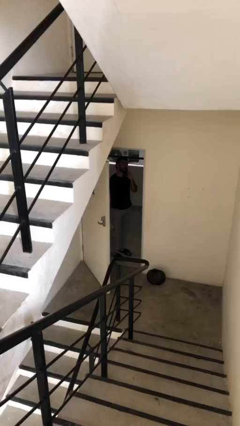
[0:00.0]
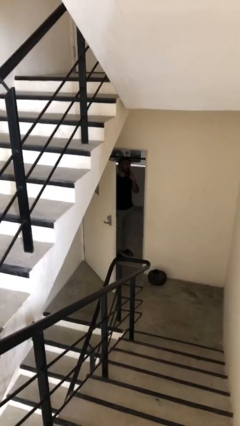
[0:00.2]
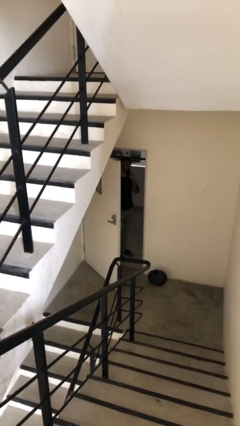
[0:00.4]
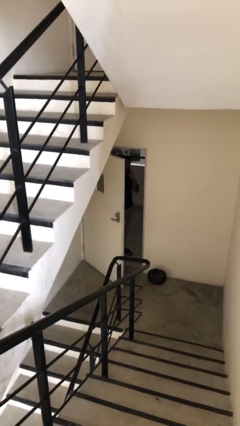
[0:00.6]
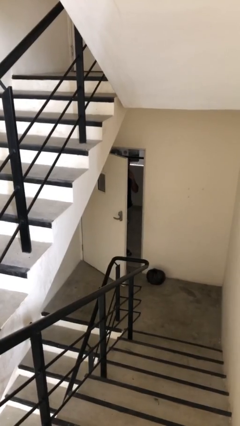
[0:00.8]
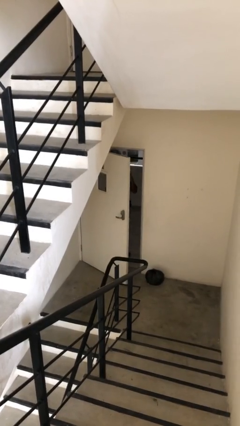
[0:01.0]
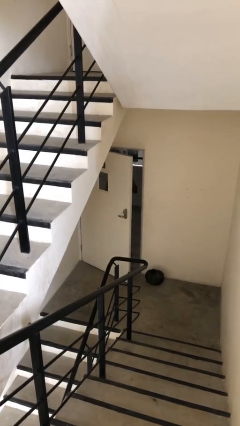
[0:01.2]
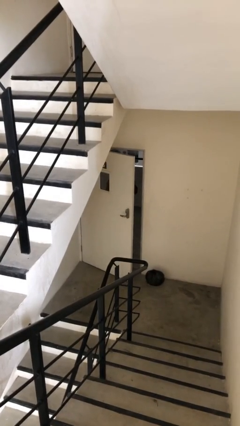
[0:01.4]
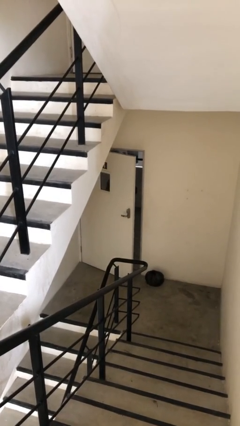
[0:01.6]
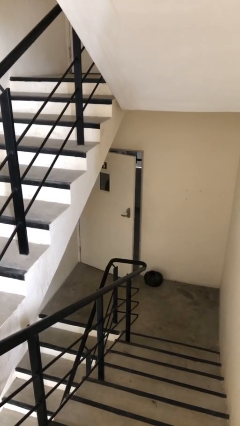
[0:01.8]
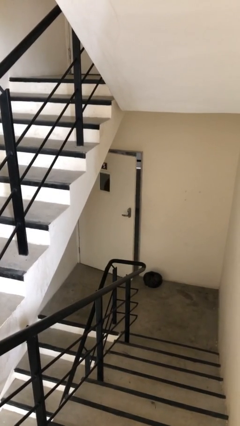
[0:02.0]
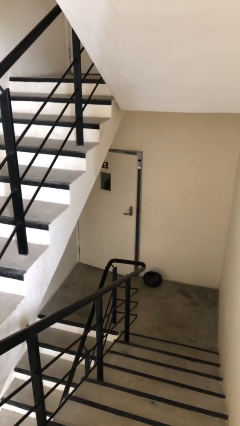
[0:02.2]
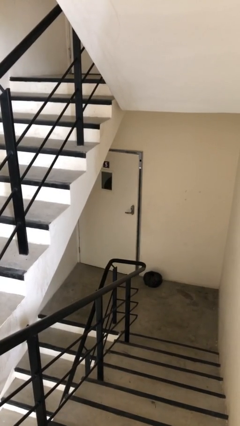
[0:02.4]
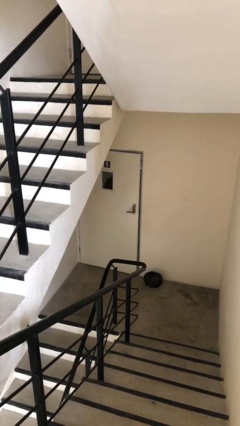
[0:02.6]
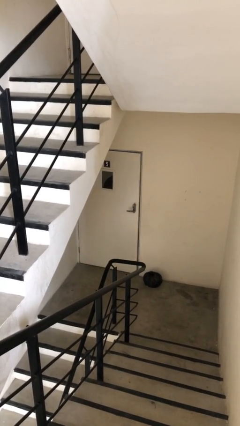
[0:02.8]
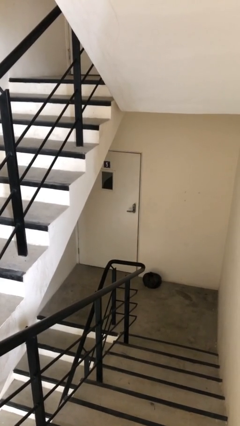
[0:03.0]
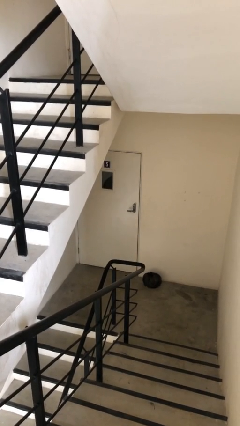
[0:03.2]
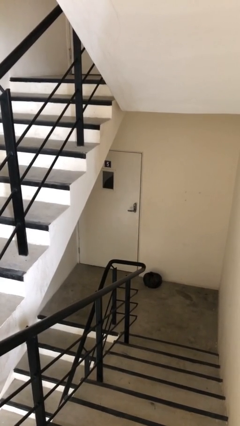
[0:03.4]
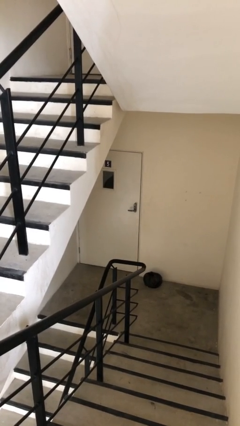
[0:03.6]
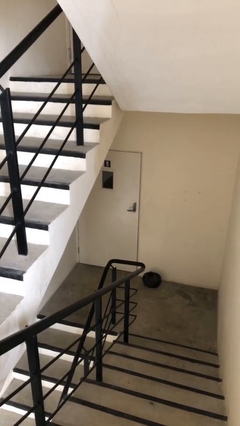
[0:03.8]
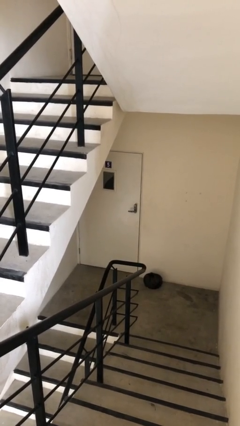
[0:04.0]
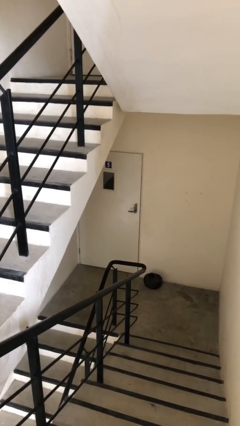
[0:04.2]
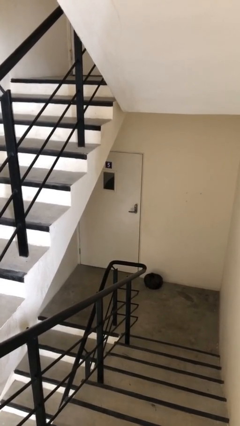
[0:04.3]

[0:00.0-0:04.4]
person closes facility door

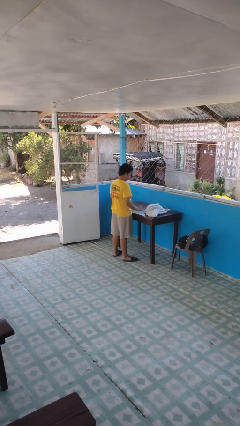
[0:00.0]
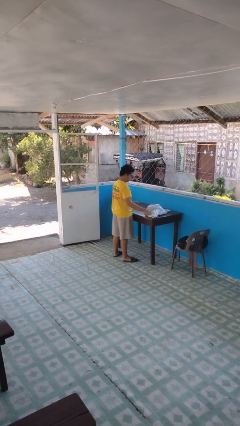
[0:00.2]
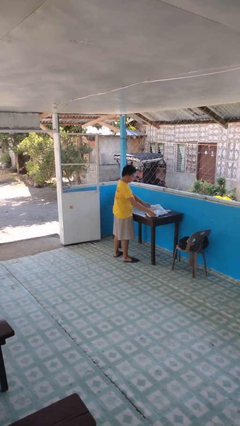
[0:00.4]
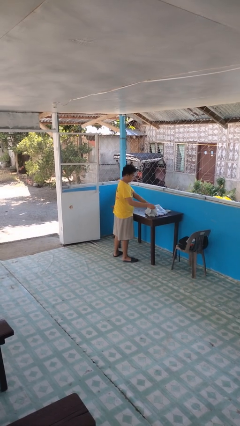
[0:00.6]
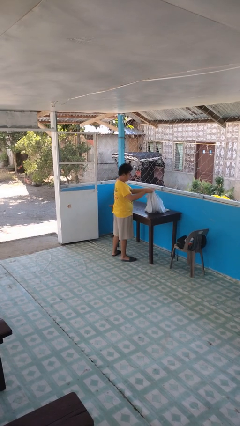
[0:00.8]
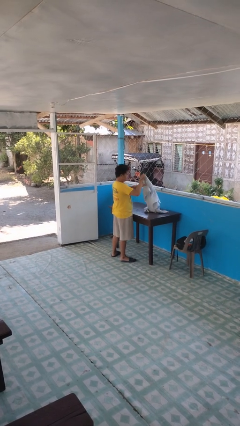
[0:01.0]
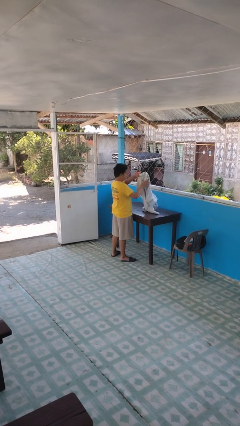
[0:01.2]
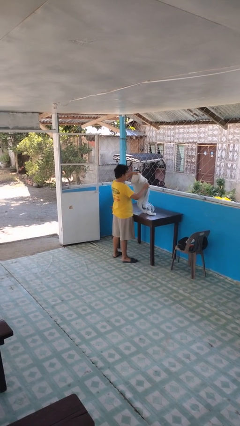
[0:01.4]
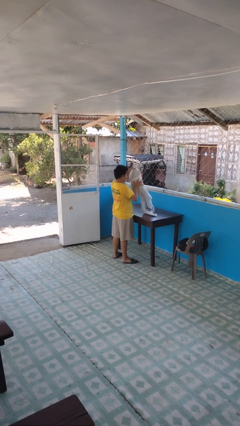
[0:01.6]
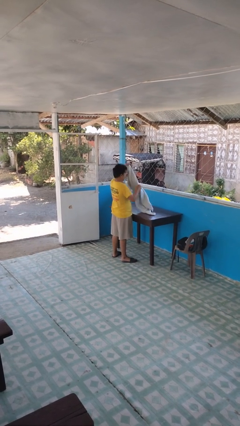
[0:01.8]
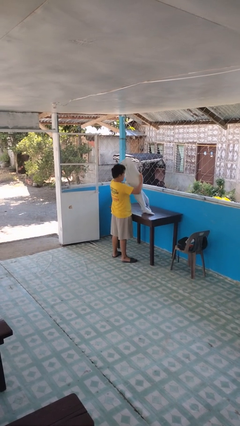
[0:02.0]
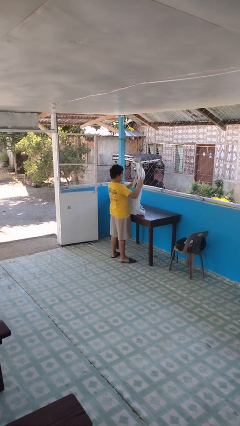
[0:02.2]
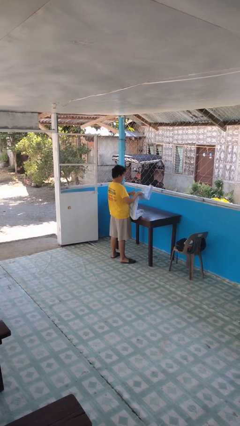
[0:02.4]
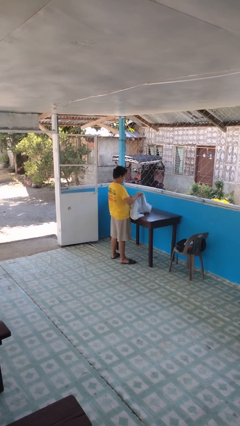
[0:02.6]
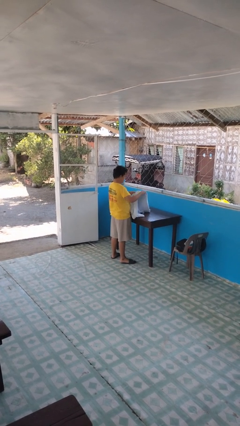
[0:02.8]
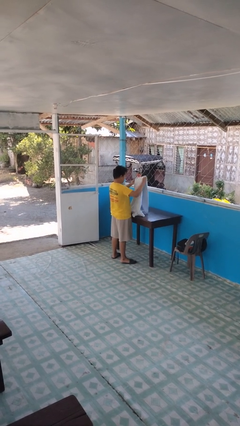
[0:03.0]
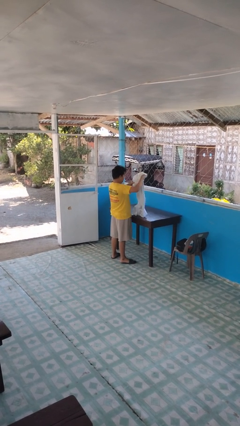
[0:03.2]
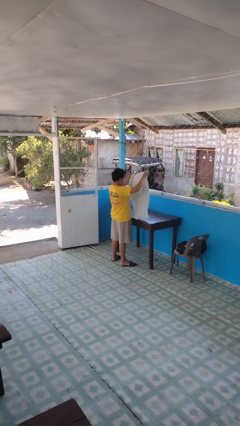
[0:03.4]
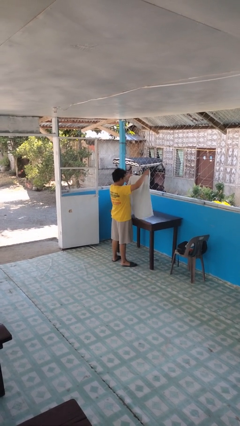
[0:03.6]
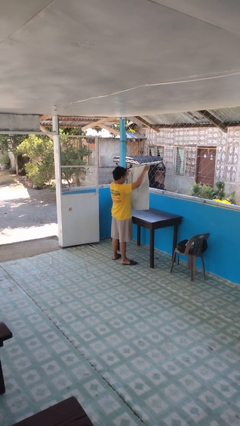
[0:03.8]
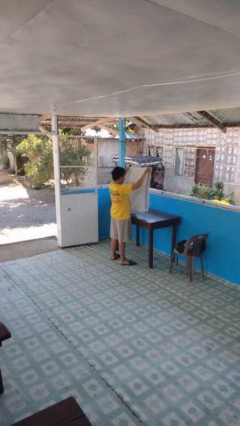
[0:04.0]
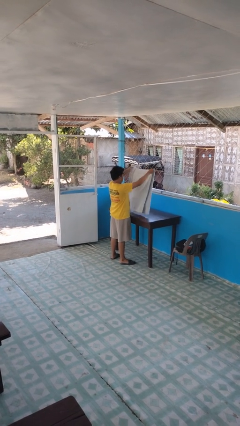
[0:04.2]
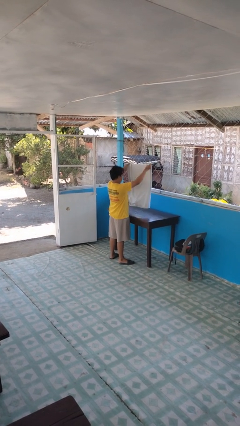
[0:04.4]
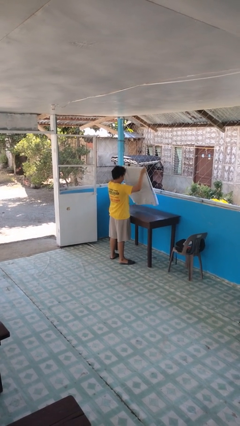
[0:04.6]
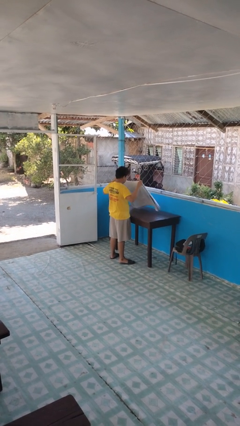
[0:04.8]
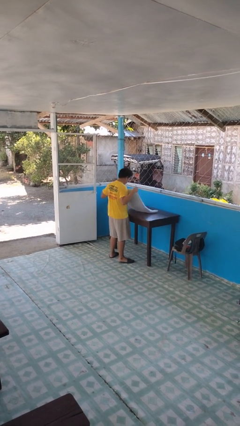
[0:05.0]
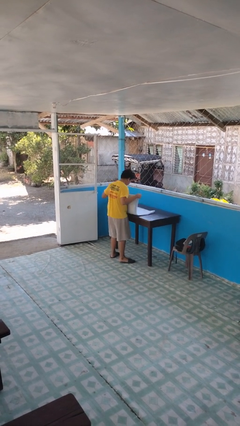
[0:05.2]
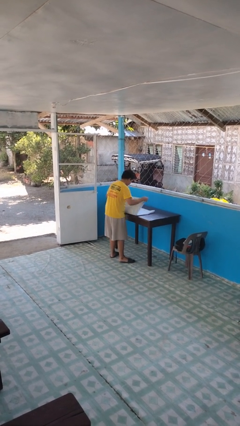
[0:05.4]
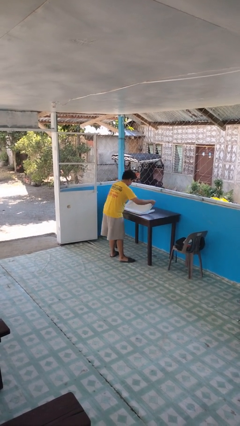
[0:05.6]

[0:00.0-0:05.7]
person folds blanket

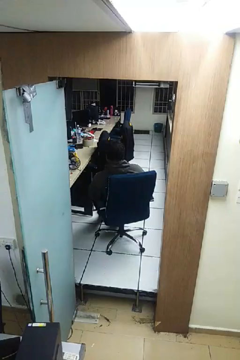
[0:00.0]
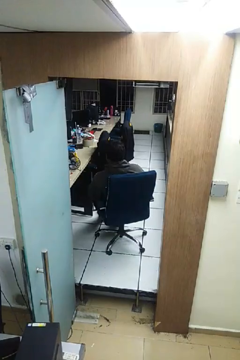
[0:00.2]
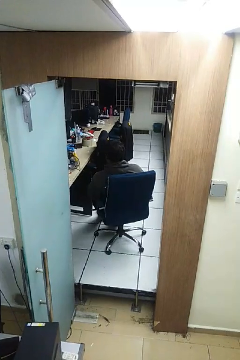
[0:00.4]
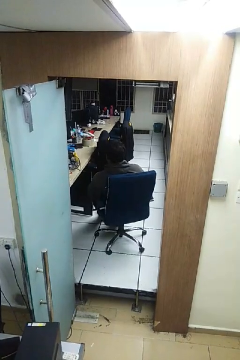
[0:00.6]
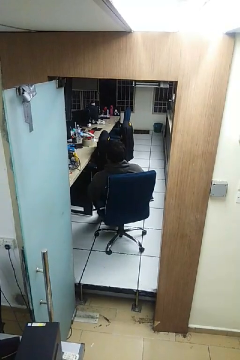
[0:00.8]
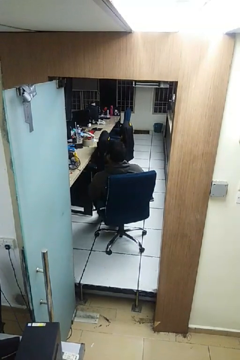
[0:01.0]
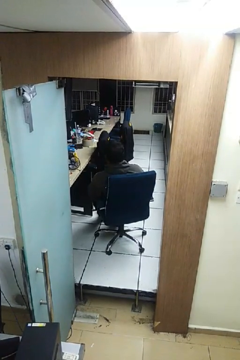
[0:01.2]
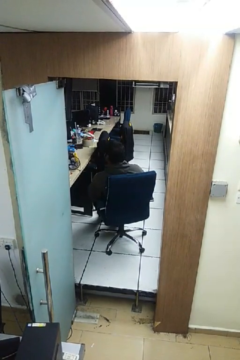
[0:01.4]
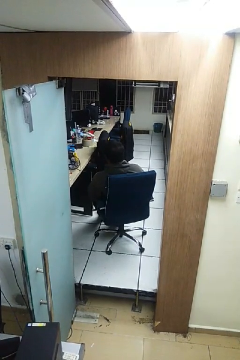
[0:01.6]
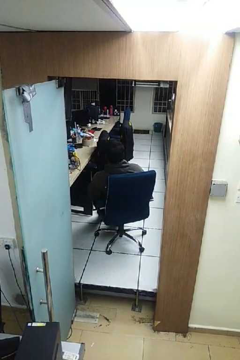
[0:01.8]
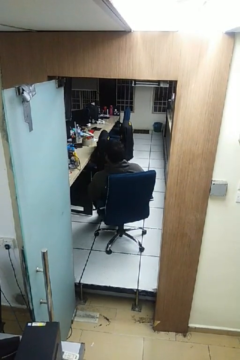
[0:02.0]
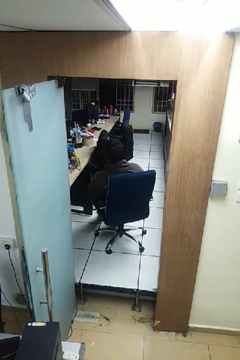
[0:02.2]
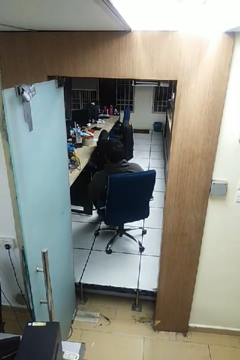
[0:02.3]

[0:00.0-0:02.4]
person shakes head

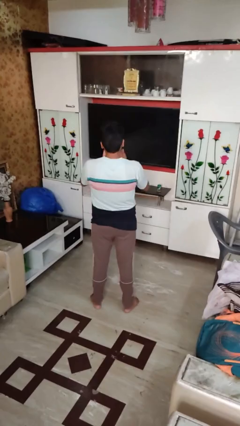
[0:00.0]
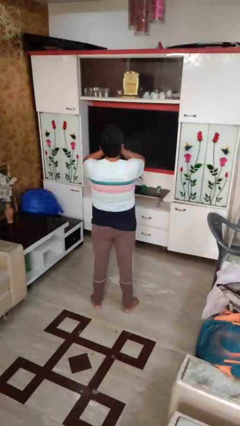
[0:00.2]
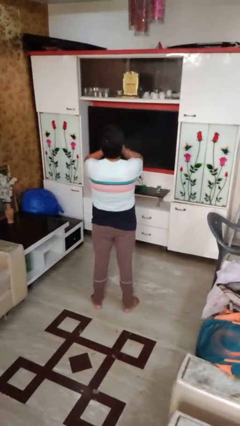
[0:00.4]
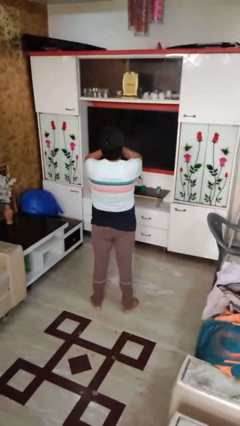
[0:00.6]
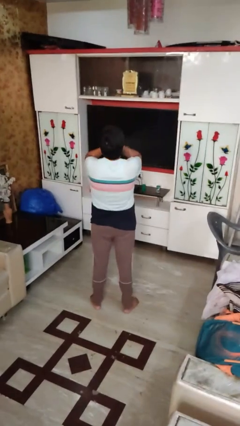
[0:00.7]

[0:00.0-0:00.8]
person covers face with hands

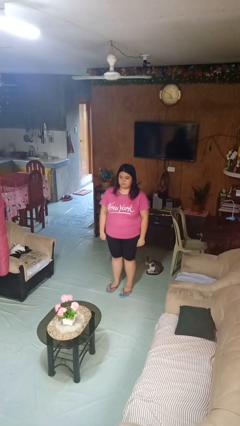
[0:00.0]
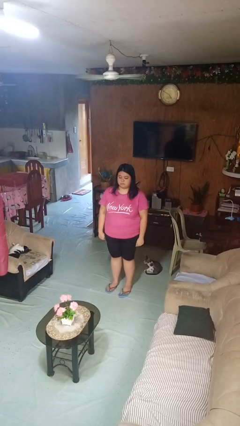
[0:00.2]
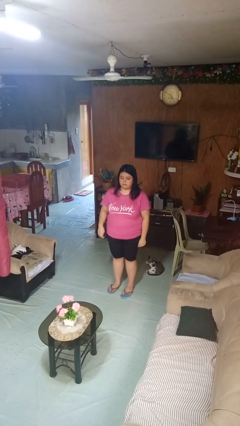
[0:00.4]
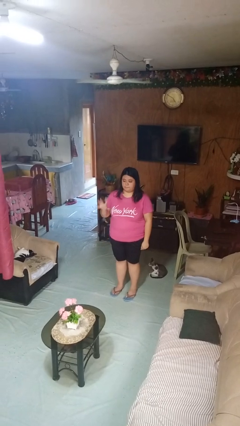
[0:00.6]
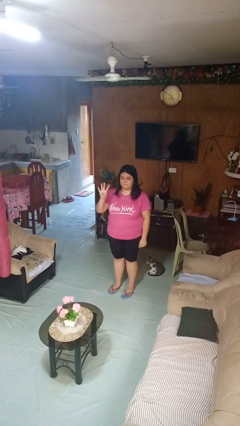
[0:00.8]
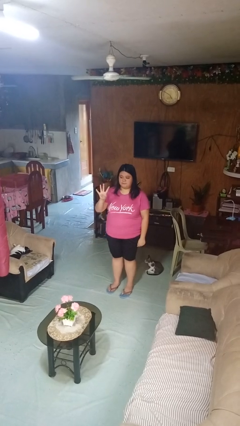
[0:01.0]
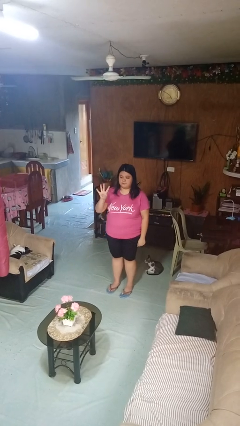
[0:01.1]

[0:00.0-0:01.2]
person gestures number four

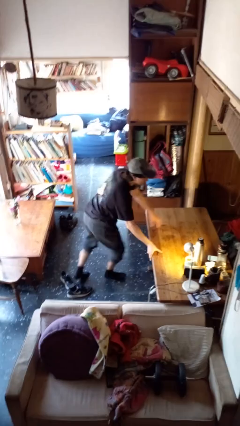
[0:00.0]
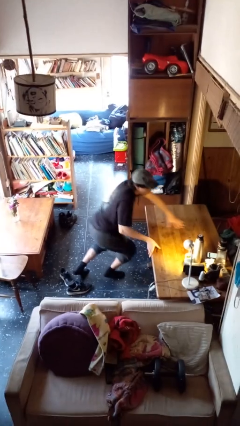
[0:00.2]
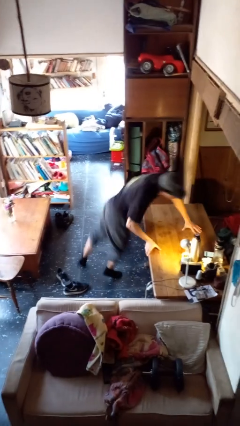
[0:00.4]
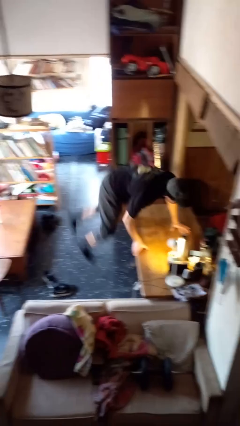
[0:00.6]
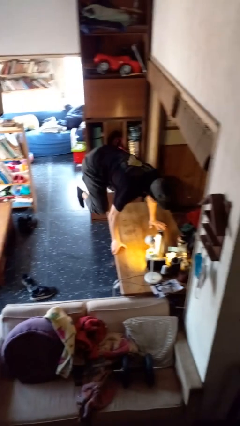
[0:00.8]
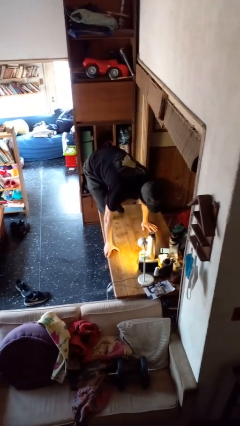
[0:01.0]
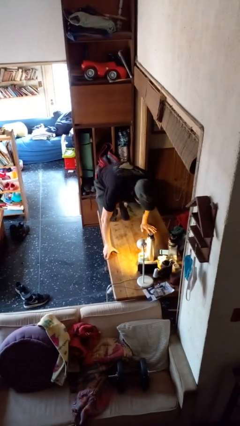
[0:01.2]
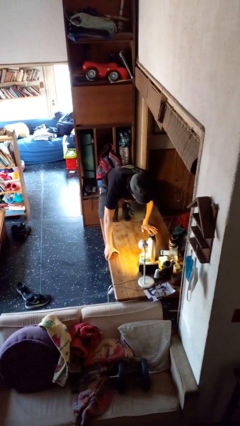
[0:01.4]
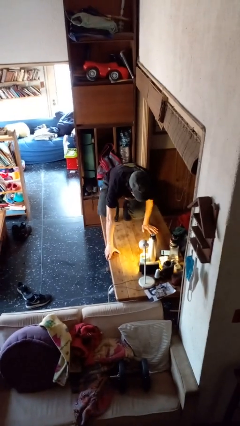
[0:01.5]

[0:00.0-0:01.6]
person climbs on table

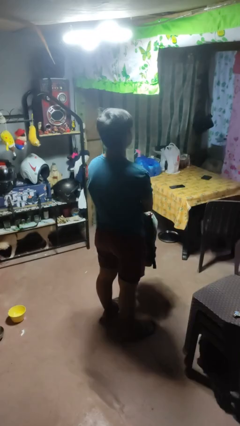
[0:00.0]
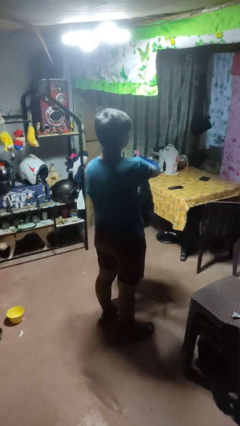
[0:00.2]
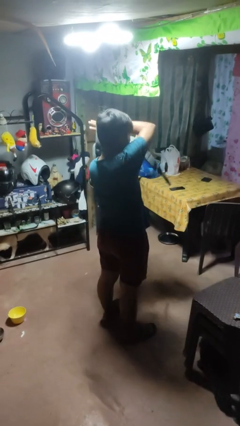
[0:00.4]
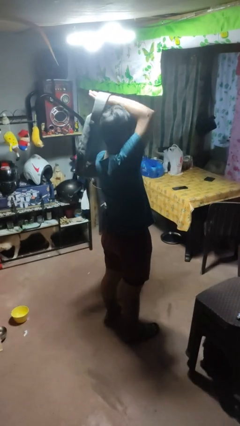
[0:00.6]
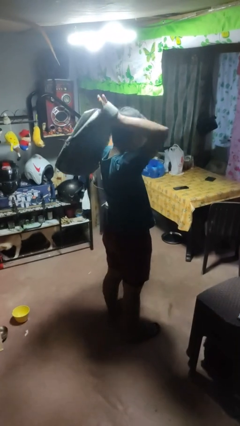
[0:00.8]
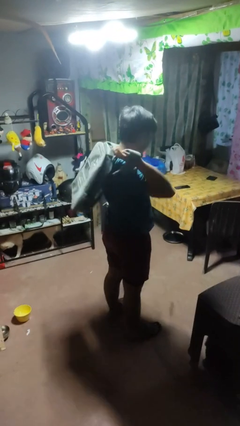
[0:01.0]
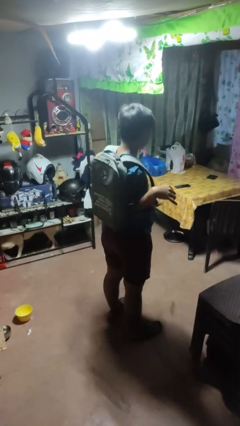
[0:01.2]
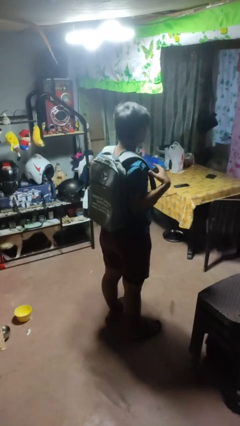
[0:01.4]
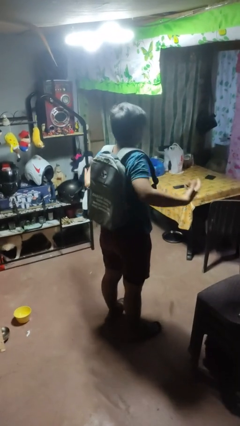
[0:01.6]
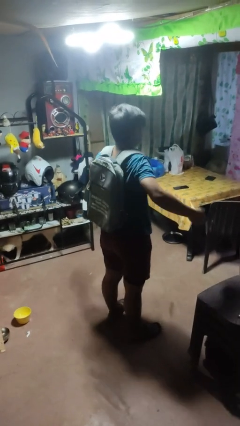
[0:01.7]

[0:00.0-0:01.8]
person puts on backpack

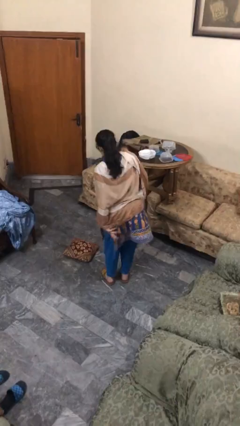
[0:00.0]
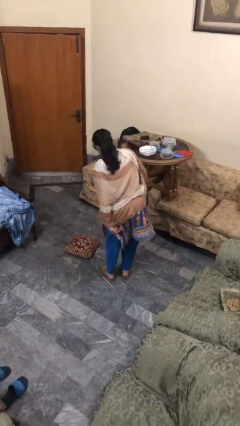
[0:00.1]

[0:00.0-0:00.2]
person picks up object from floor
